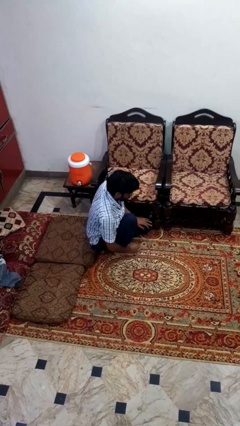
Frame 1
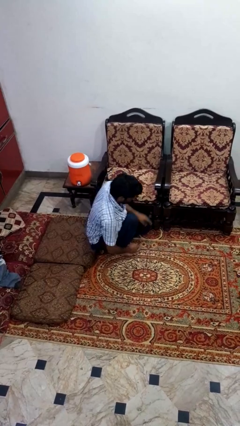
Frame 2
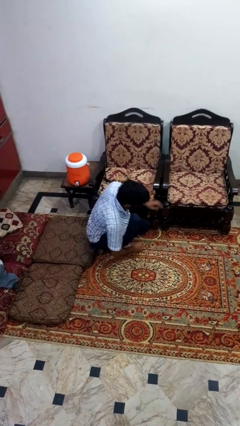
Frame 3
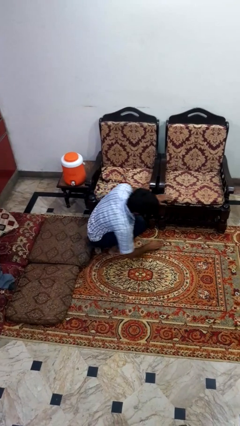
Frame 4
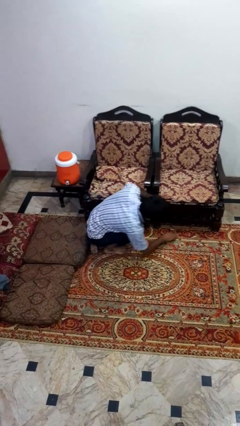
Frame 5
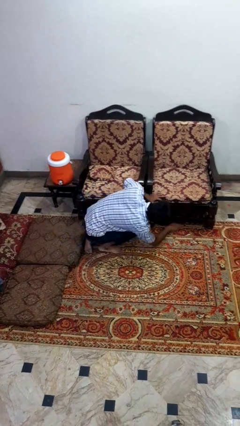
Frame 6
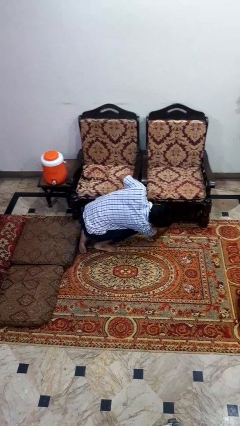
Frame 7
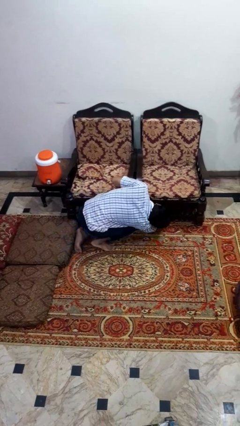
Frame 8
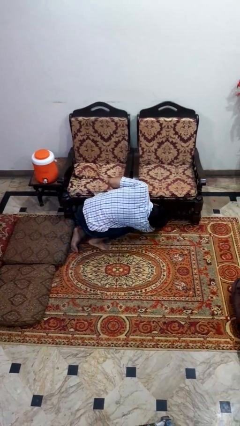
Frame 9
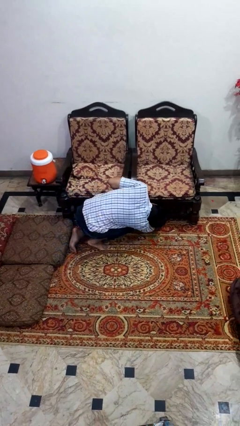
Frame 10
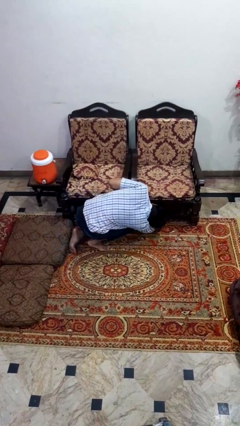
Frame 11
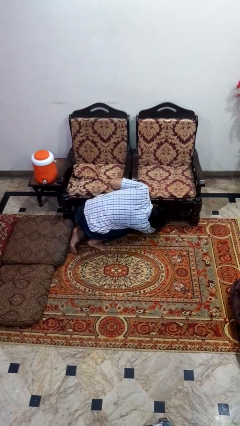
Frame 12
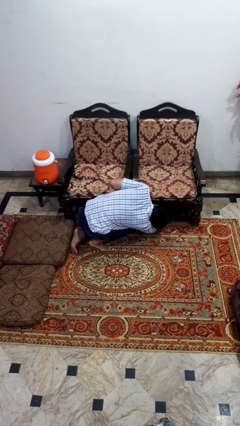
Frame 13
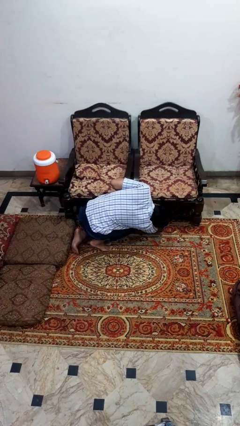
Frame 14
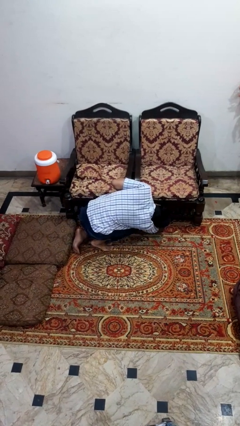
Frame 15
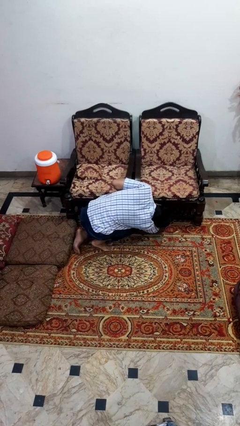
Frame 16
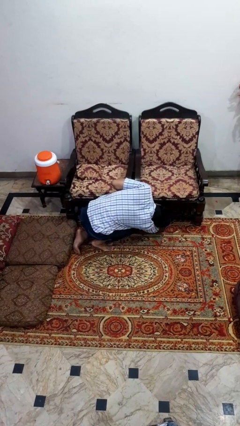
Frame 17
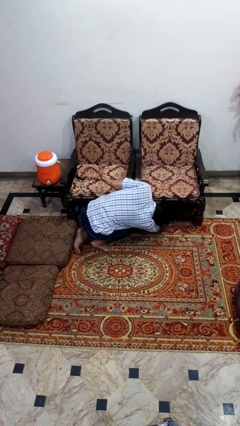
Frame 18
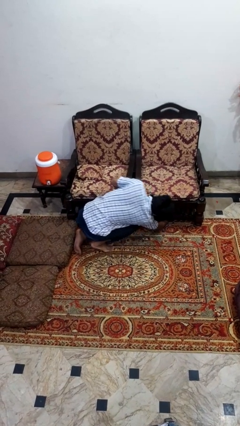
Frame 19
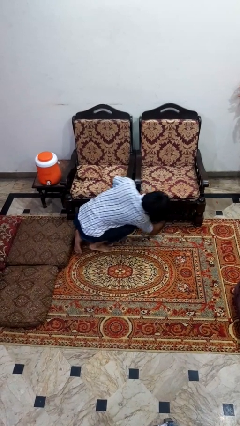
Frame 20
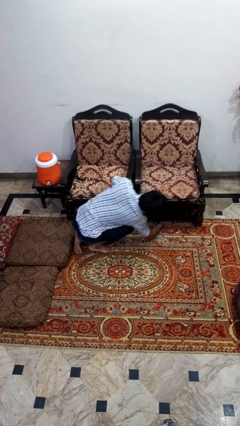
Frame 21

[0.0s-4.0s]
person searches under couch

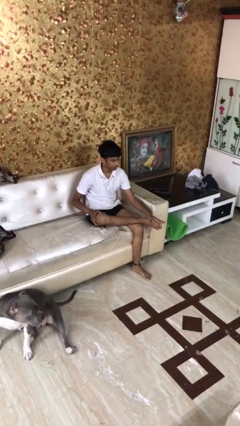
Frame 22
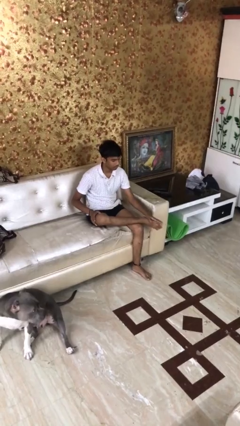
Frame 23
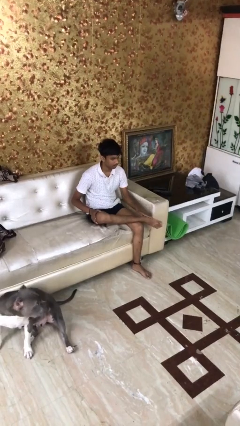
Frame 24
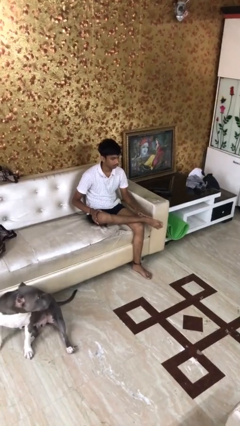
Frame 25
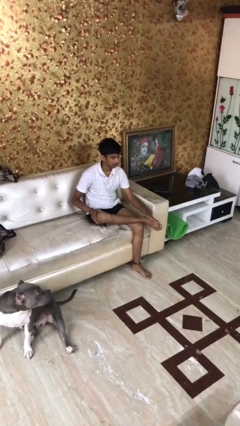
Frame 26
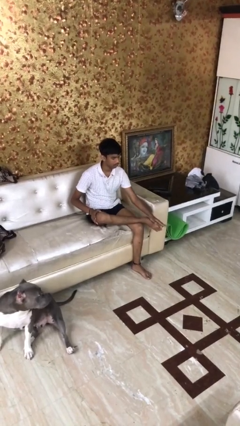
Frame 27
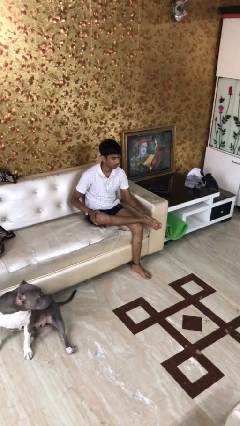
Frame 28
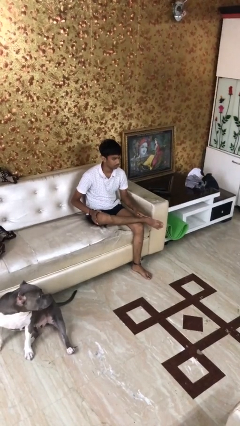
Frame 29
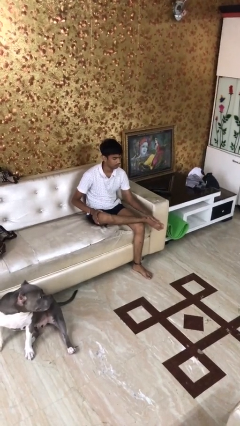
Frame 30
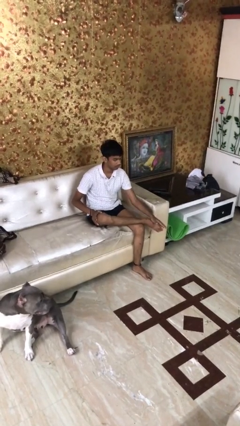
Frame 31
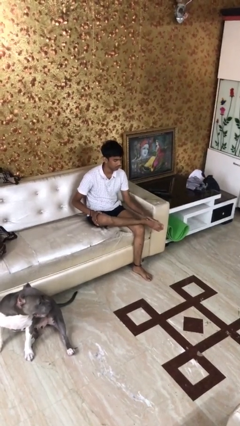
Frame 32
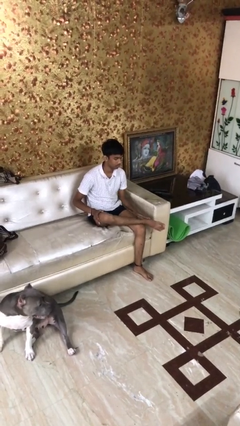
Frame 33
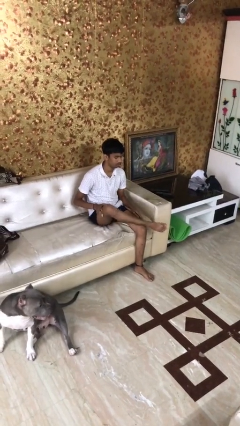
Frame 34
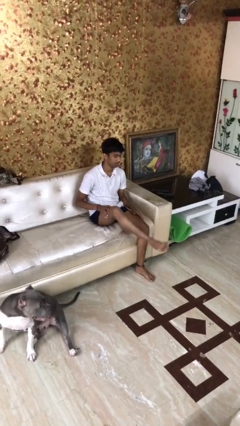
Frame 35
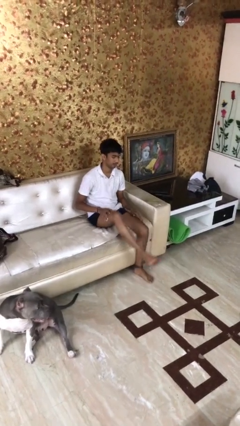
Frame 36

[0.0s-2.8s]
person rubs foot

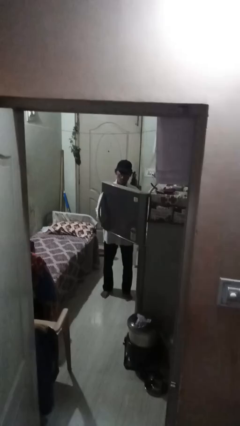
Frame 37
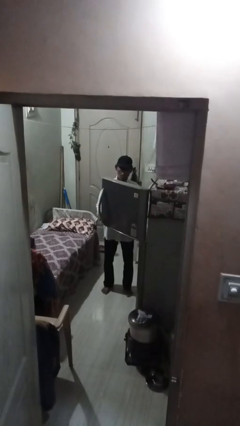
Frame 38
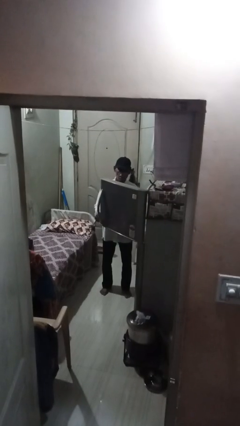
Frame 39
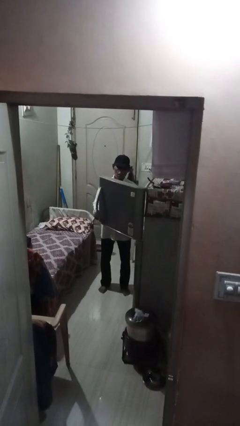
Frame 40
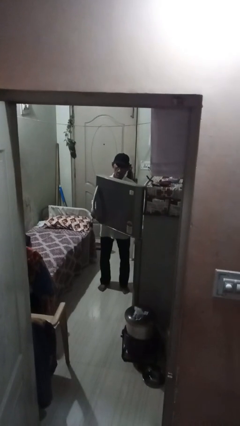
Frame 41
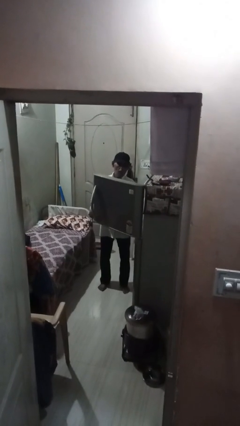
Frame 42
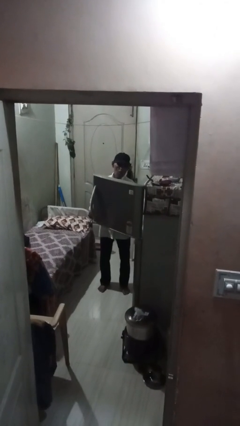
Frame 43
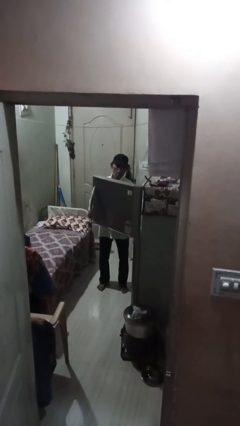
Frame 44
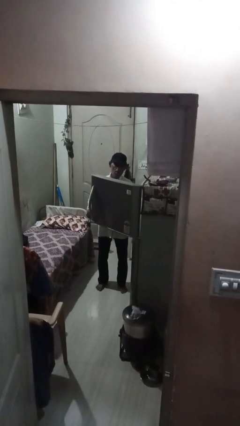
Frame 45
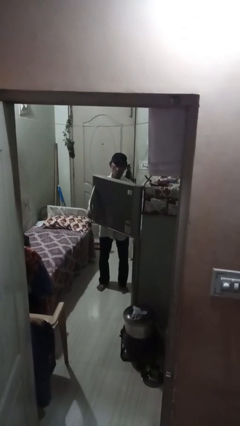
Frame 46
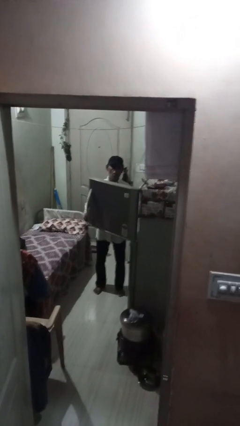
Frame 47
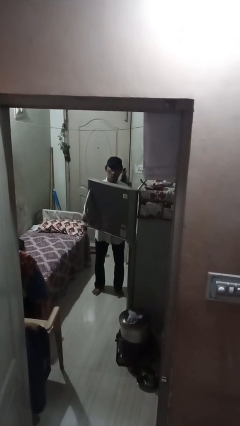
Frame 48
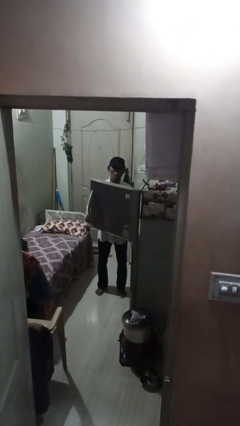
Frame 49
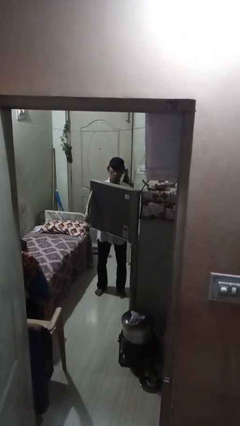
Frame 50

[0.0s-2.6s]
person puts object into refrigerator

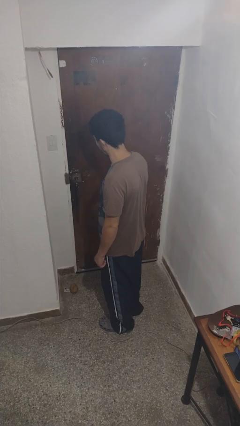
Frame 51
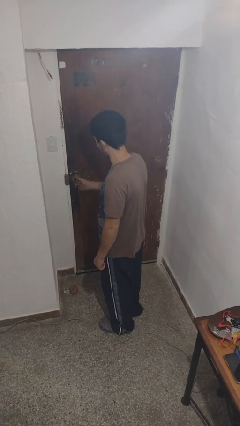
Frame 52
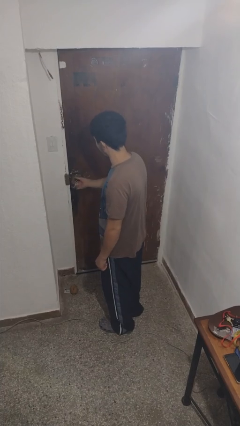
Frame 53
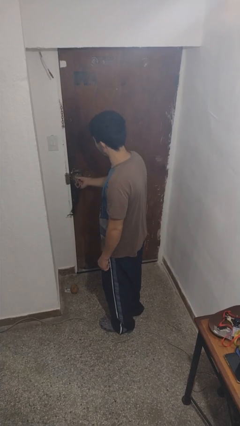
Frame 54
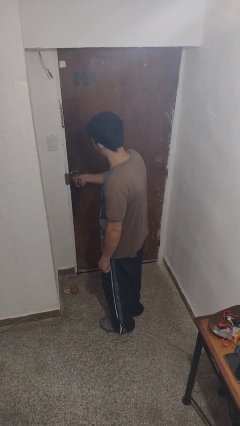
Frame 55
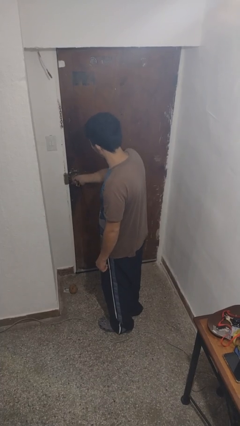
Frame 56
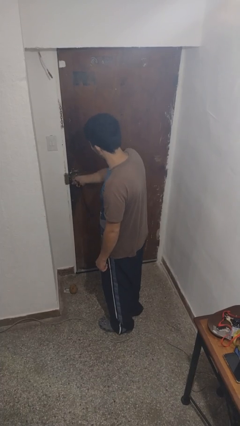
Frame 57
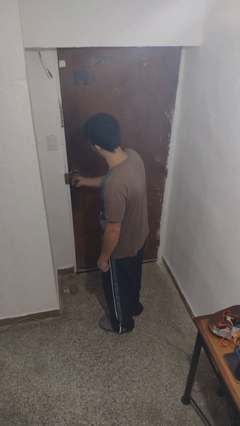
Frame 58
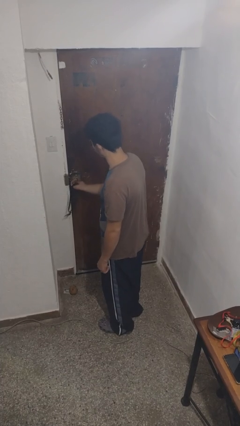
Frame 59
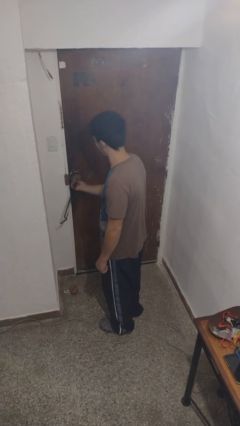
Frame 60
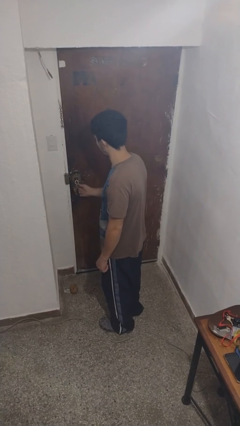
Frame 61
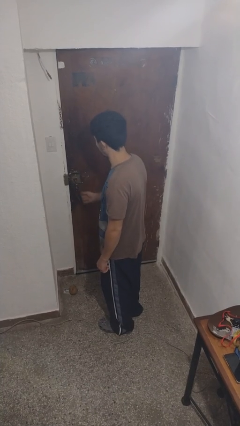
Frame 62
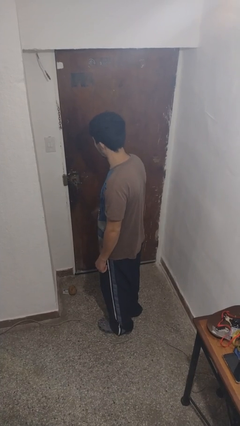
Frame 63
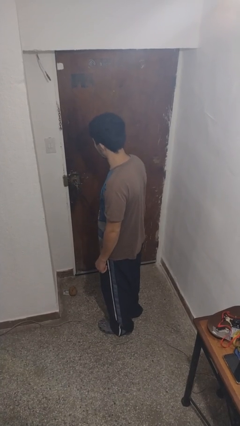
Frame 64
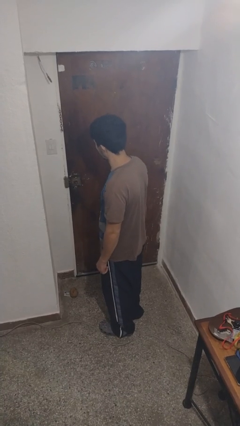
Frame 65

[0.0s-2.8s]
person locks door with keys

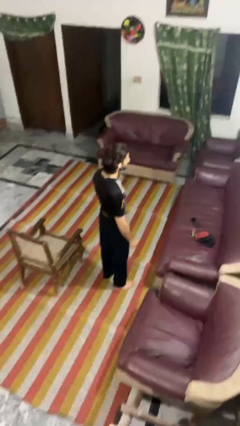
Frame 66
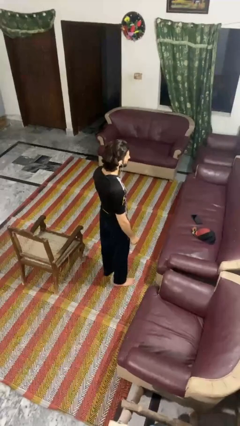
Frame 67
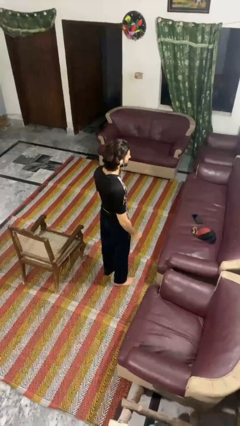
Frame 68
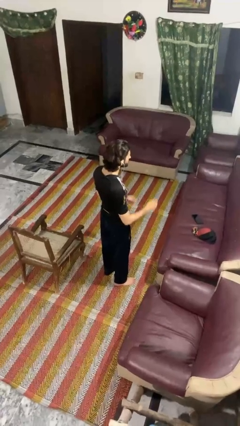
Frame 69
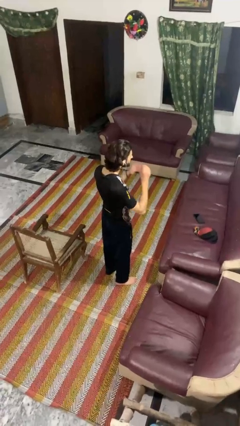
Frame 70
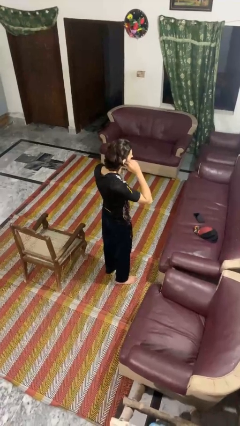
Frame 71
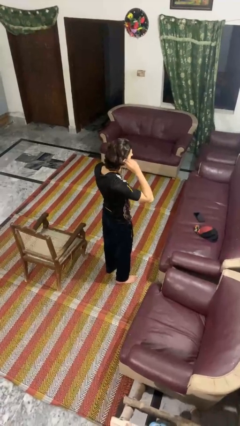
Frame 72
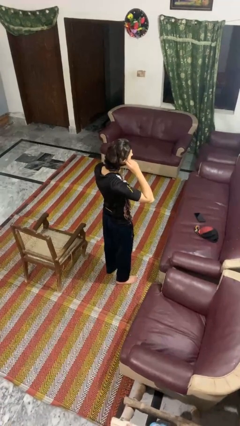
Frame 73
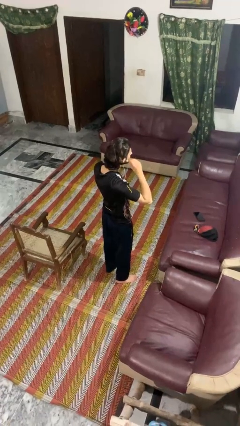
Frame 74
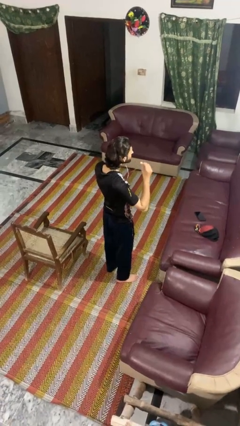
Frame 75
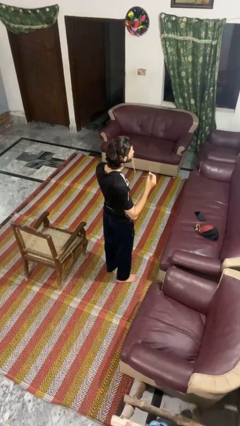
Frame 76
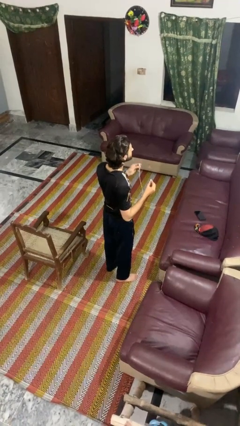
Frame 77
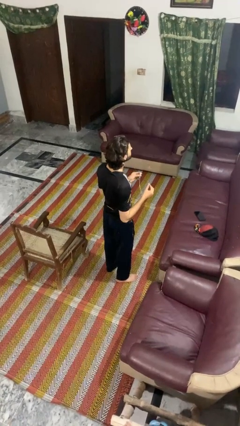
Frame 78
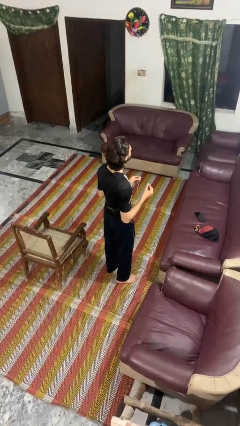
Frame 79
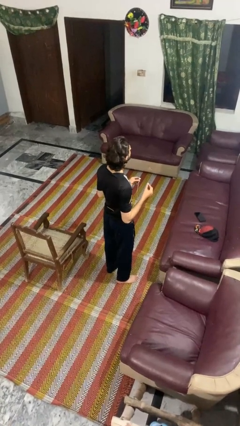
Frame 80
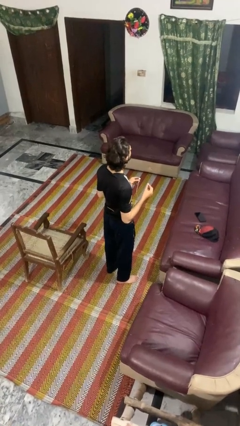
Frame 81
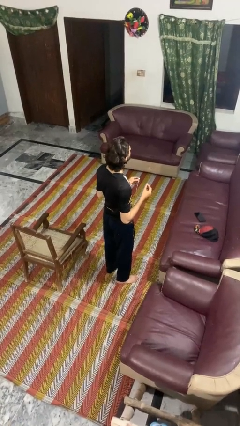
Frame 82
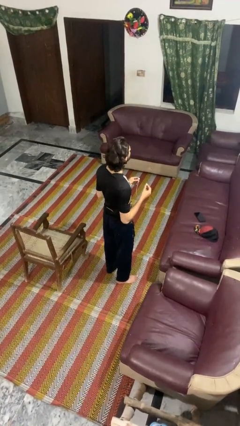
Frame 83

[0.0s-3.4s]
person takes off headphones

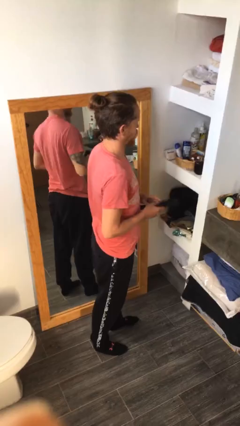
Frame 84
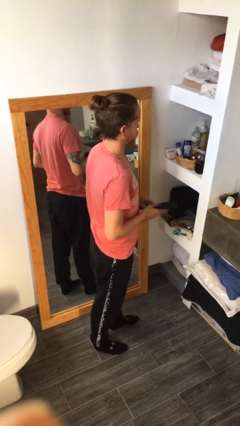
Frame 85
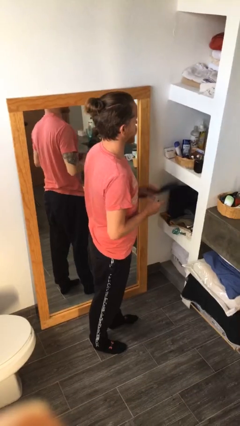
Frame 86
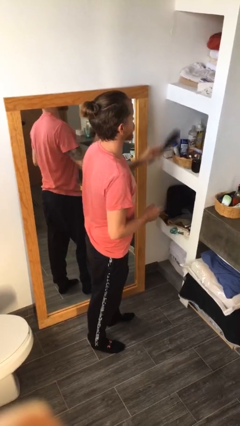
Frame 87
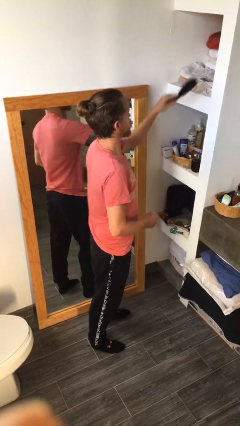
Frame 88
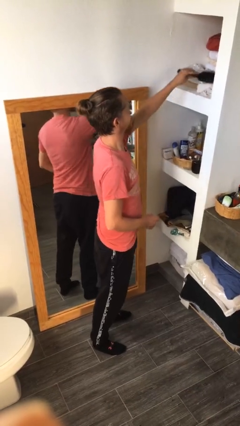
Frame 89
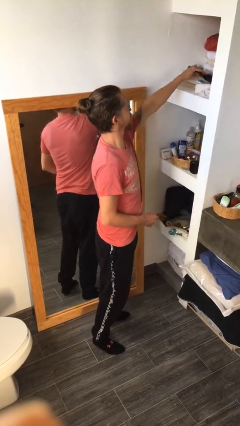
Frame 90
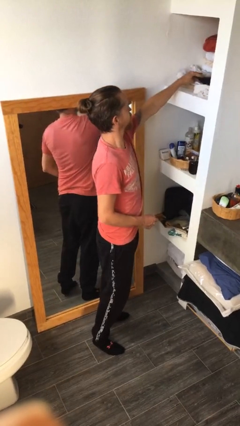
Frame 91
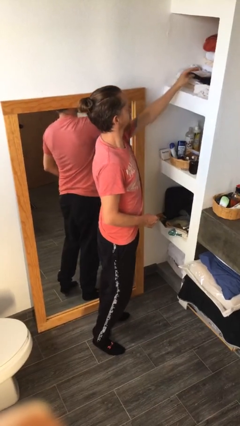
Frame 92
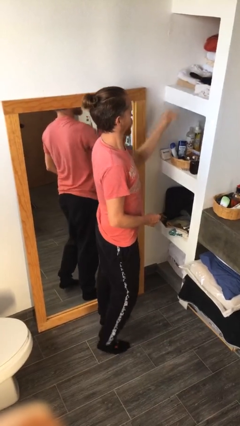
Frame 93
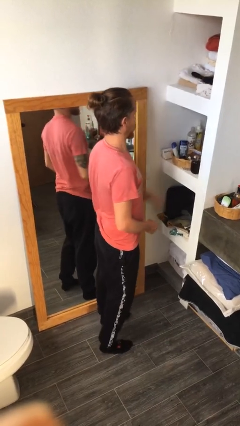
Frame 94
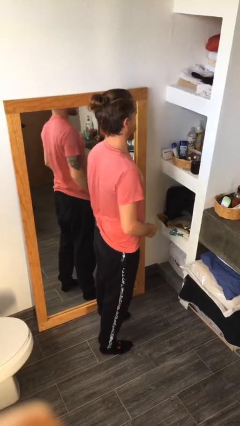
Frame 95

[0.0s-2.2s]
person puts down object on countertop
